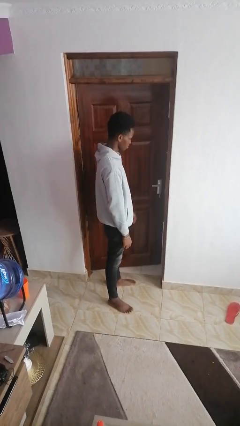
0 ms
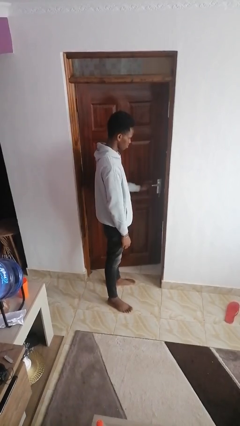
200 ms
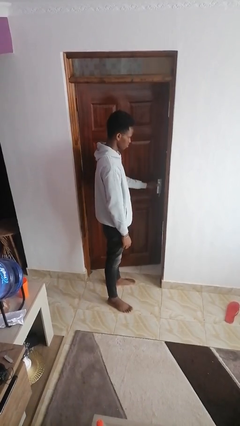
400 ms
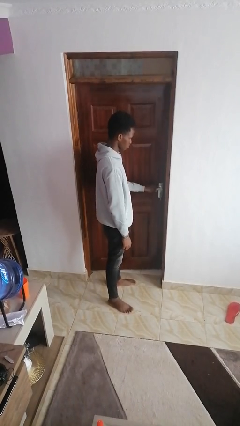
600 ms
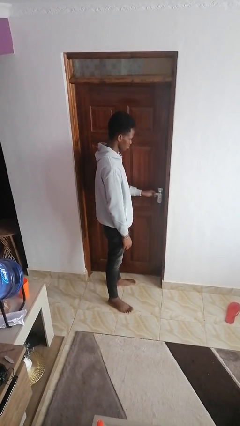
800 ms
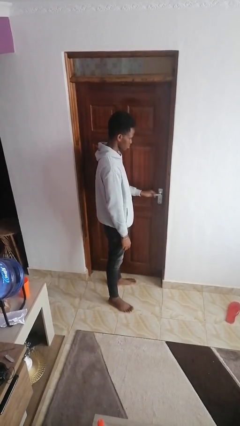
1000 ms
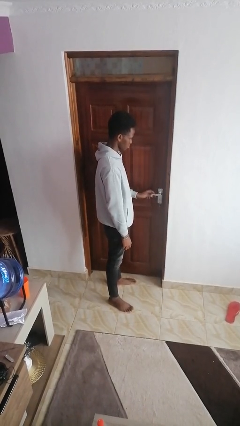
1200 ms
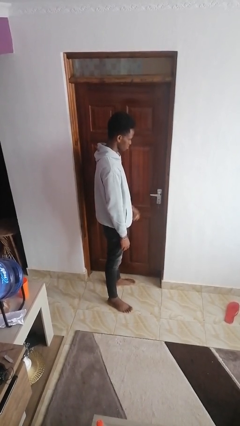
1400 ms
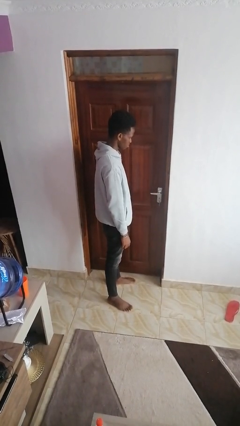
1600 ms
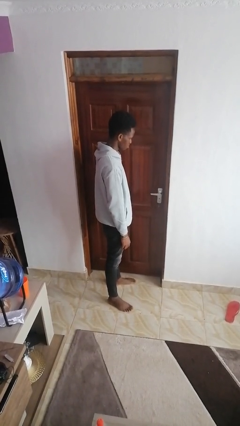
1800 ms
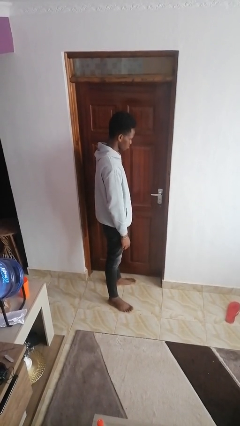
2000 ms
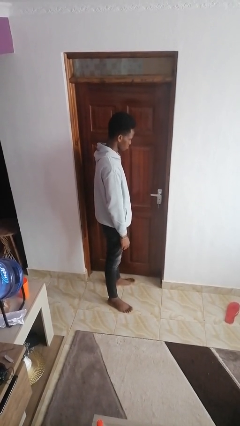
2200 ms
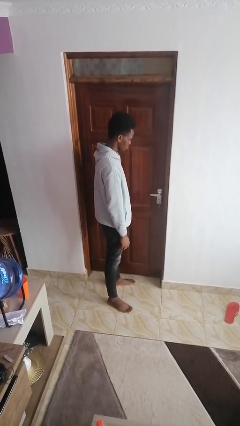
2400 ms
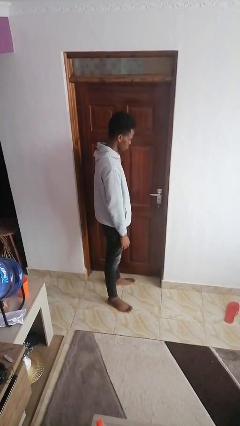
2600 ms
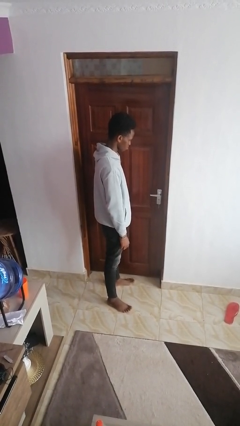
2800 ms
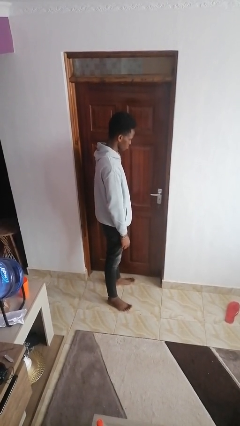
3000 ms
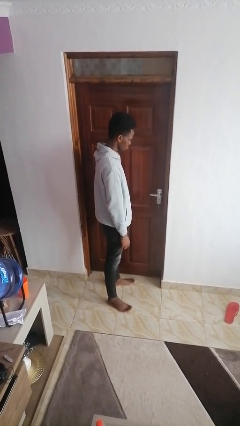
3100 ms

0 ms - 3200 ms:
person closes facility door

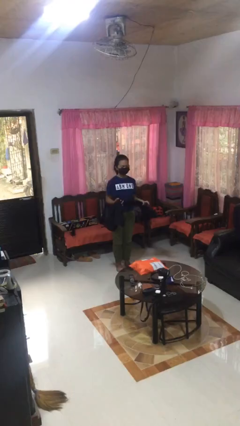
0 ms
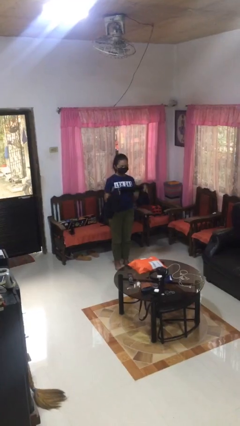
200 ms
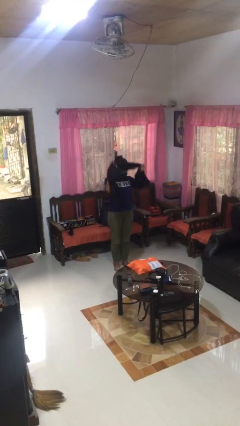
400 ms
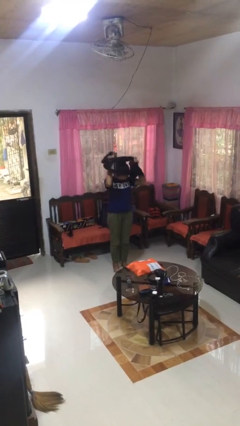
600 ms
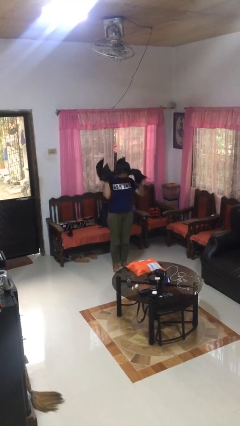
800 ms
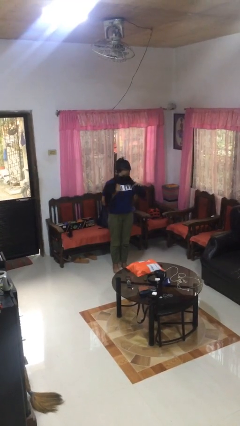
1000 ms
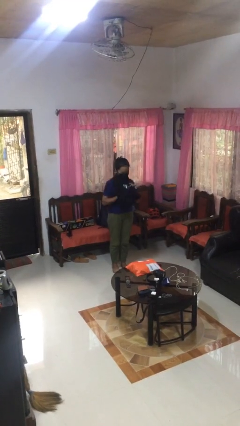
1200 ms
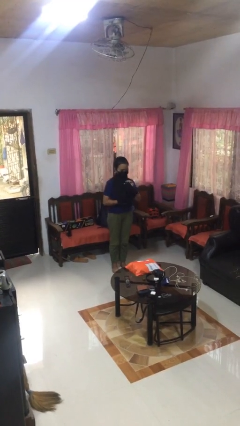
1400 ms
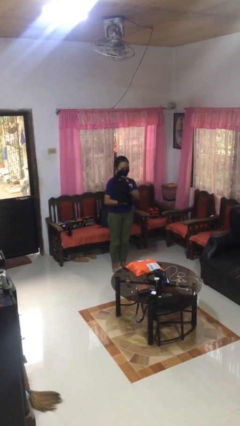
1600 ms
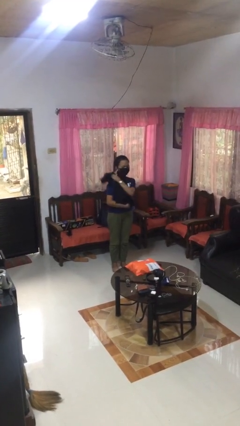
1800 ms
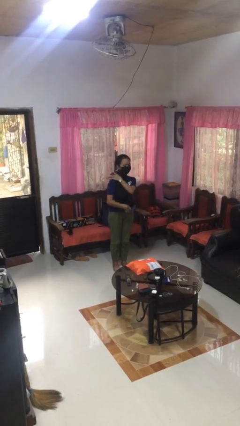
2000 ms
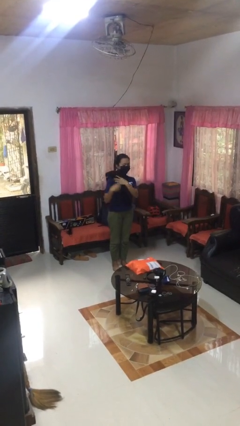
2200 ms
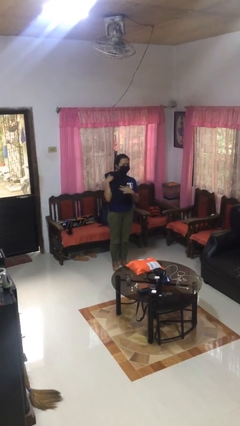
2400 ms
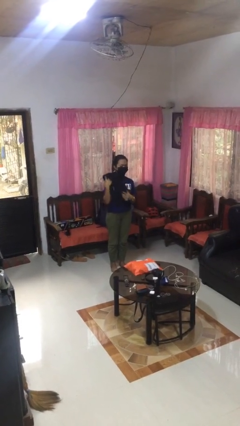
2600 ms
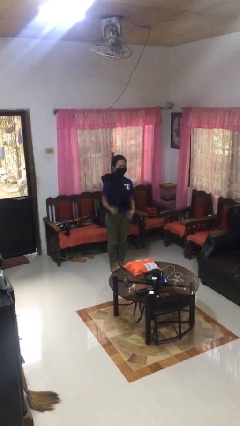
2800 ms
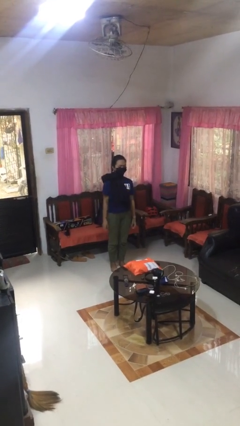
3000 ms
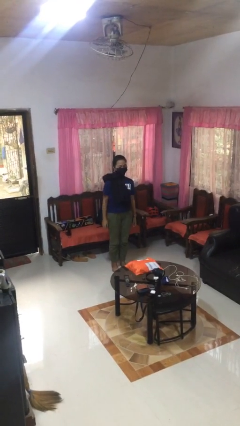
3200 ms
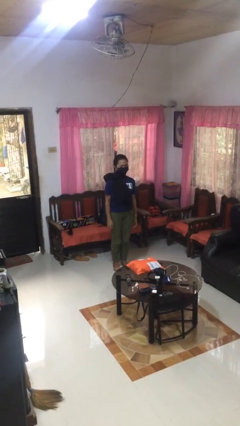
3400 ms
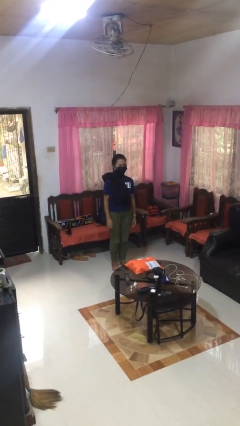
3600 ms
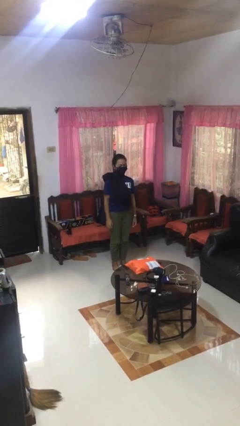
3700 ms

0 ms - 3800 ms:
person puts on scarf

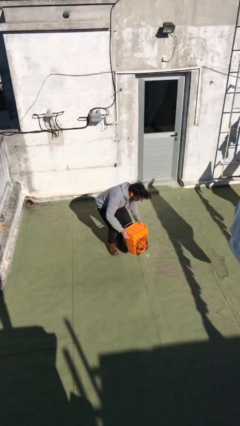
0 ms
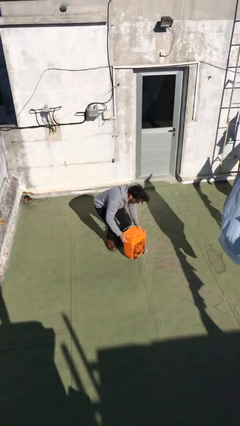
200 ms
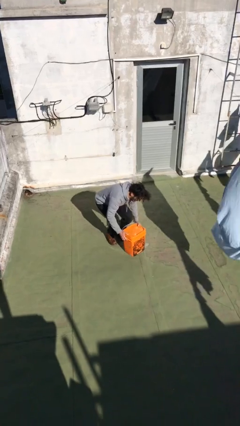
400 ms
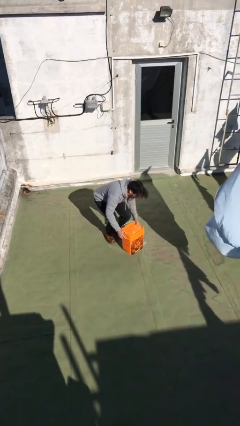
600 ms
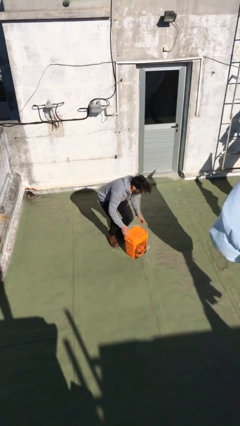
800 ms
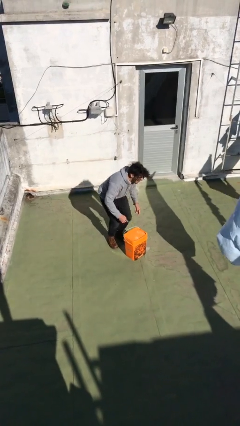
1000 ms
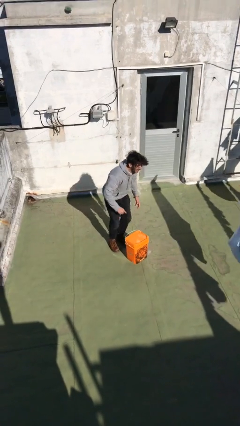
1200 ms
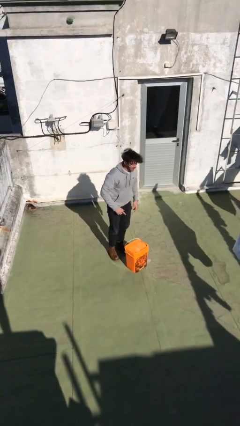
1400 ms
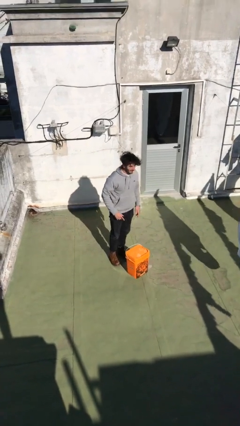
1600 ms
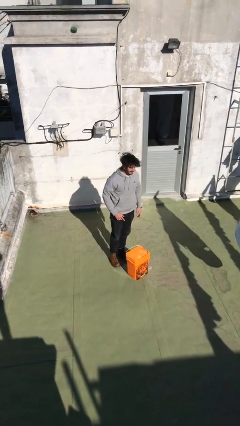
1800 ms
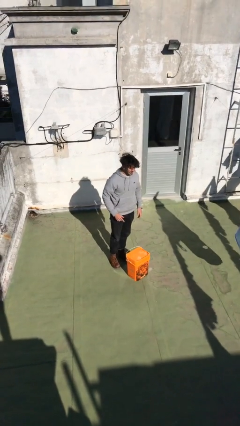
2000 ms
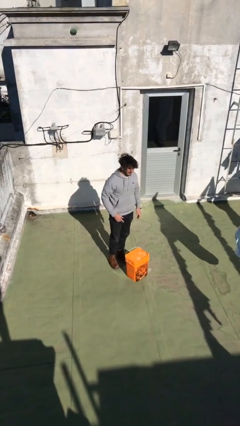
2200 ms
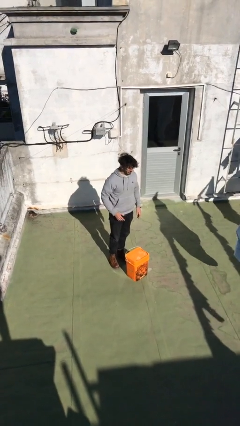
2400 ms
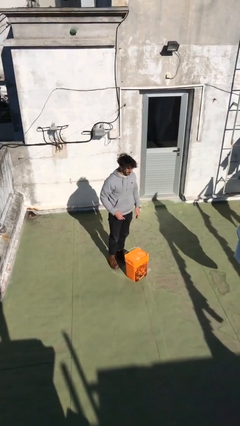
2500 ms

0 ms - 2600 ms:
person puts down object on floor

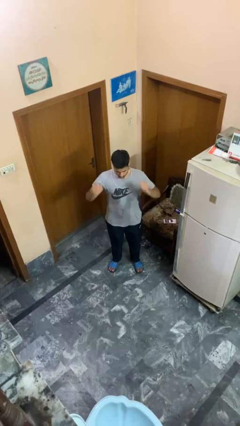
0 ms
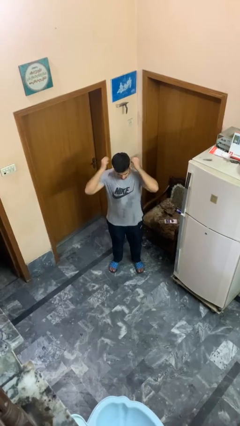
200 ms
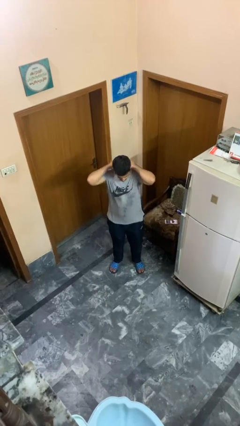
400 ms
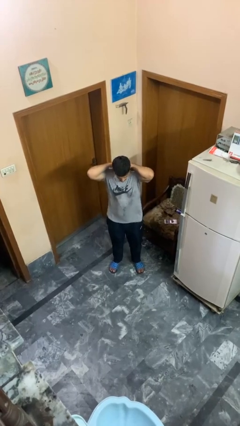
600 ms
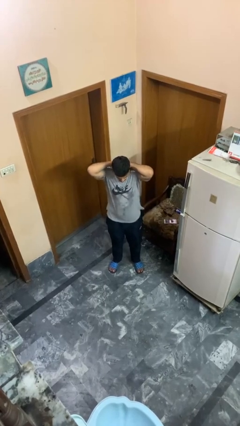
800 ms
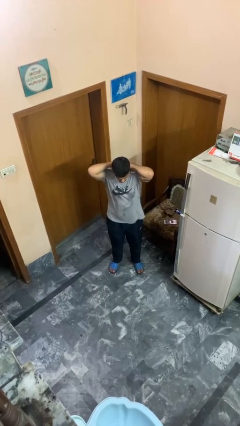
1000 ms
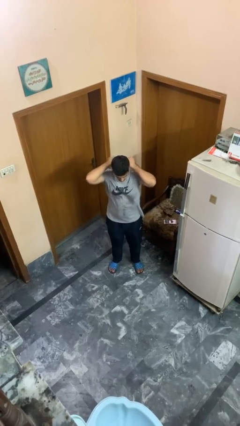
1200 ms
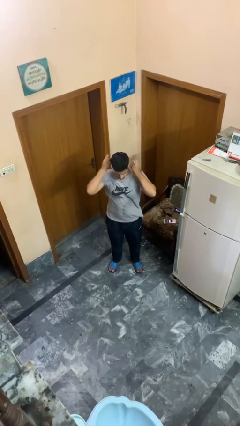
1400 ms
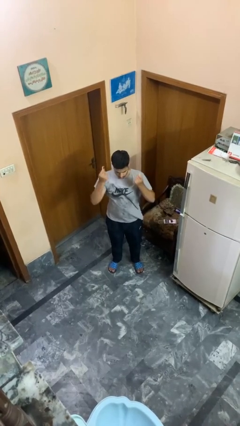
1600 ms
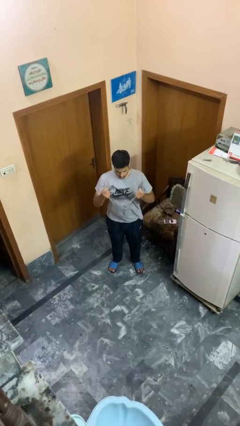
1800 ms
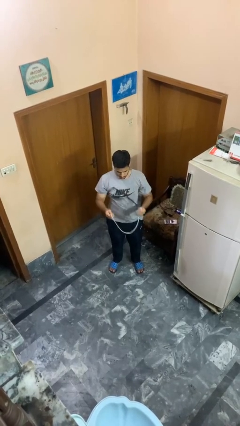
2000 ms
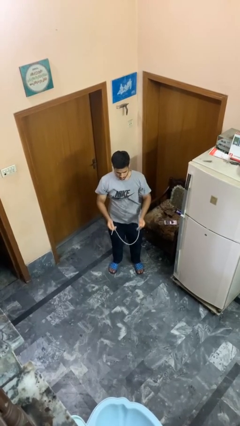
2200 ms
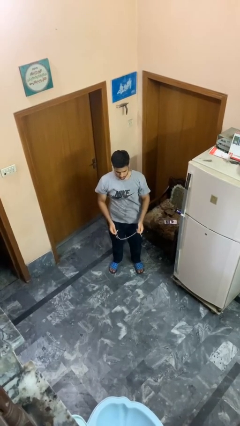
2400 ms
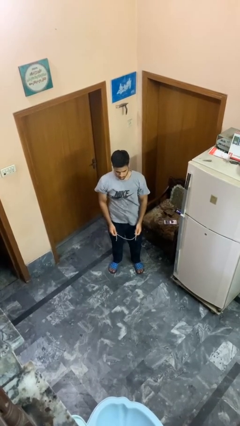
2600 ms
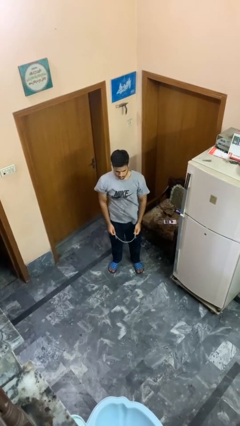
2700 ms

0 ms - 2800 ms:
person takes off necklace

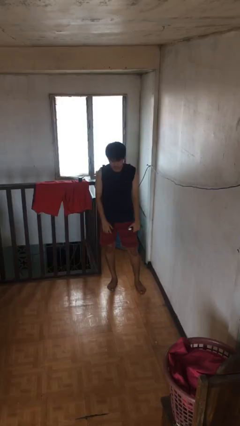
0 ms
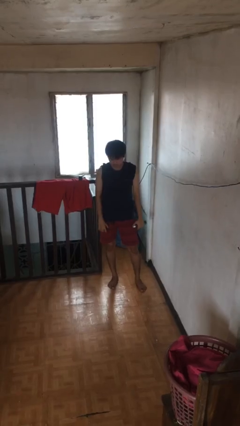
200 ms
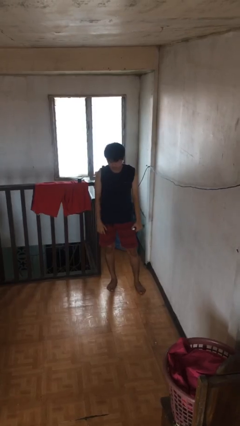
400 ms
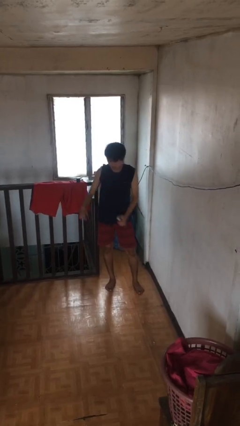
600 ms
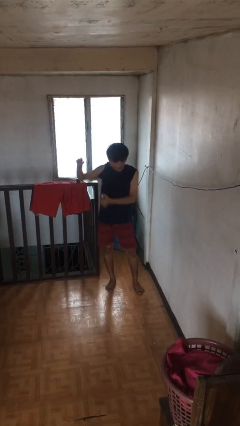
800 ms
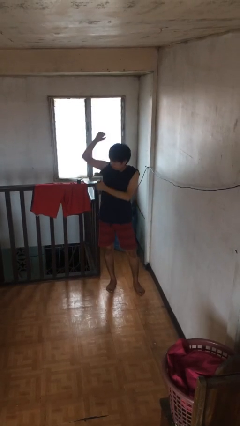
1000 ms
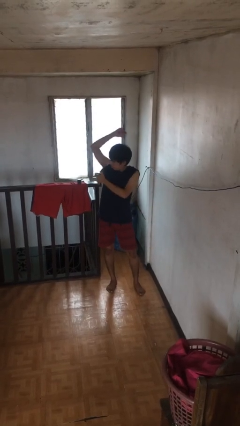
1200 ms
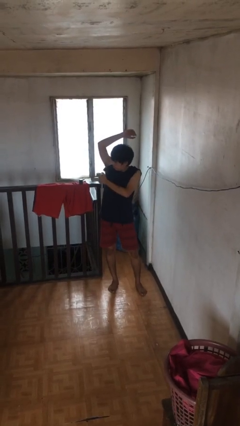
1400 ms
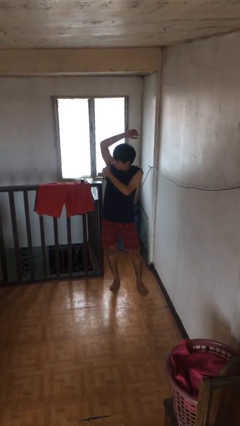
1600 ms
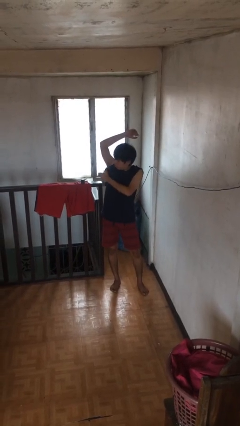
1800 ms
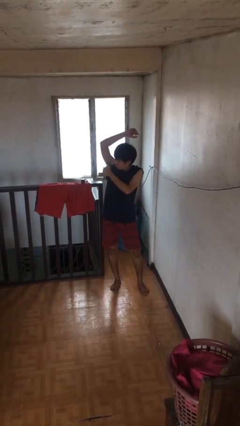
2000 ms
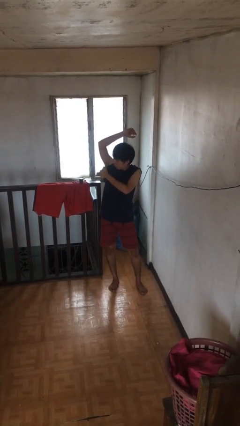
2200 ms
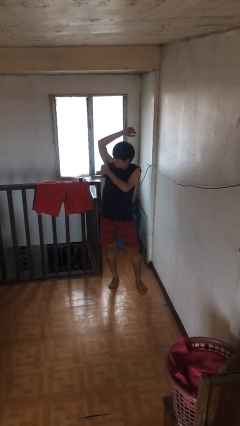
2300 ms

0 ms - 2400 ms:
person applies deodorant

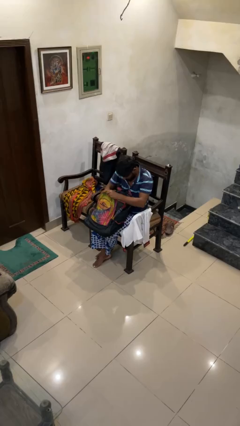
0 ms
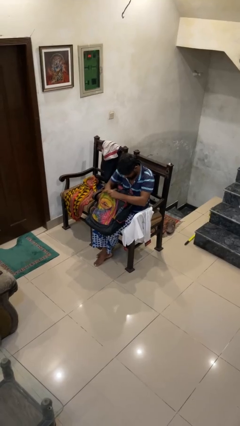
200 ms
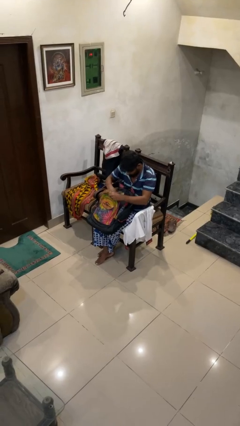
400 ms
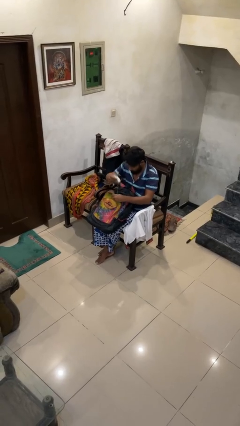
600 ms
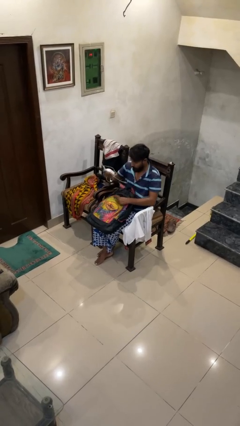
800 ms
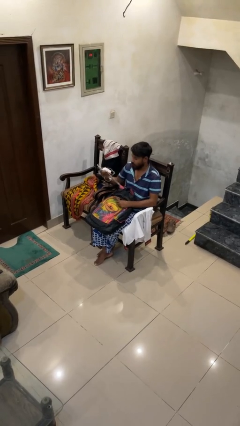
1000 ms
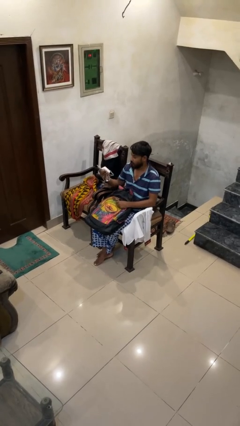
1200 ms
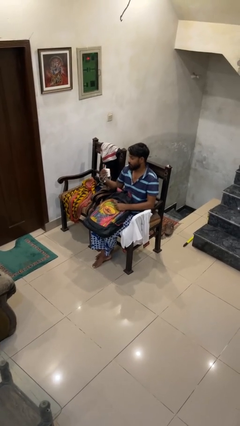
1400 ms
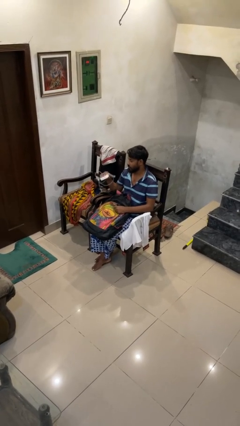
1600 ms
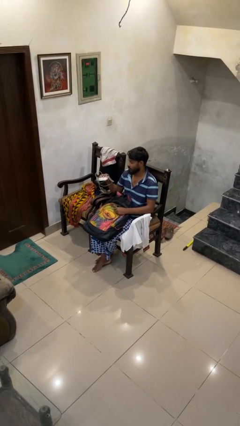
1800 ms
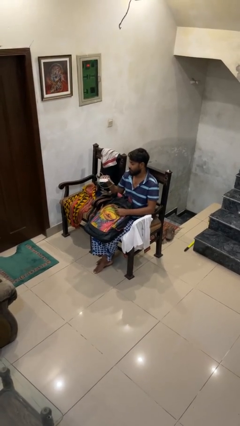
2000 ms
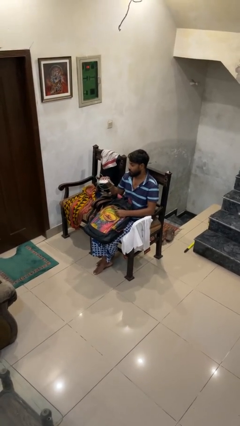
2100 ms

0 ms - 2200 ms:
person takes object from backpack

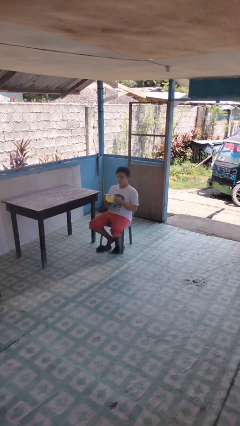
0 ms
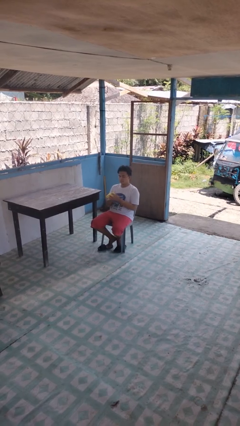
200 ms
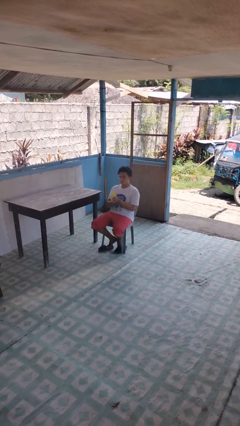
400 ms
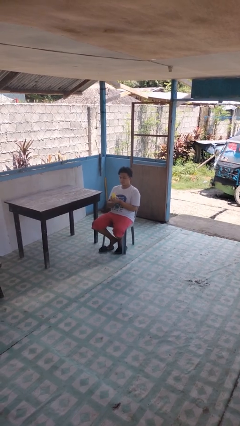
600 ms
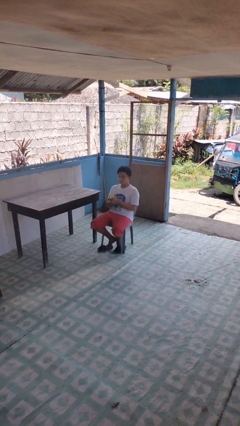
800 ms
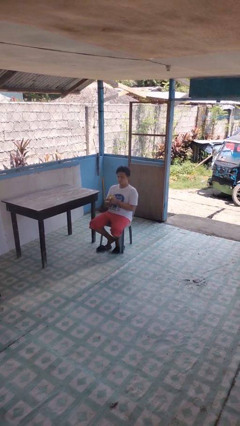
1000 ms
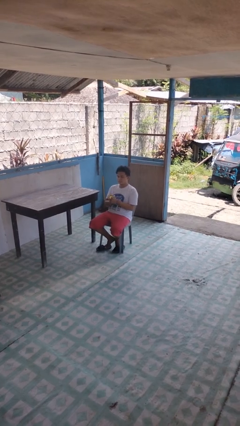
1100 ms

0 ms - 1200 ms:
person crumples paper
